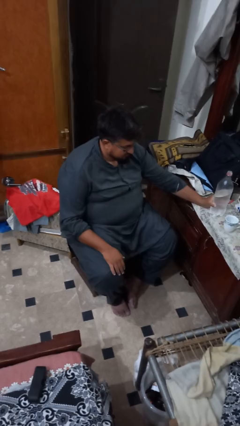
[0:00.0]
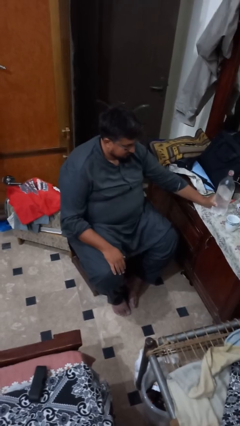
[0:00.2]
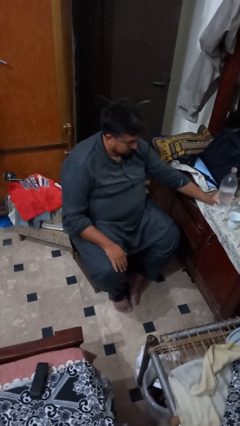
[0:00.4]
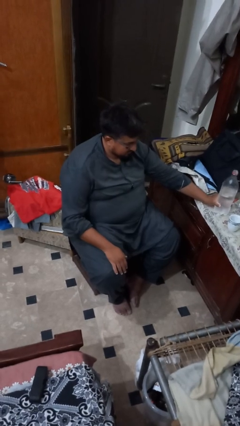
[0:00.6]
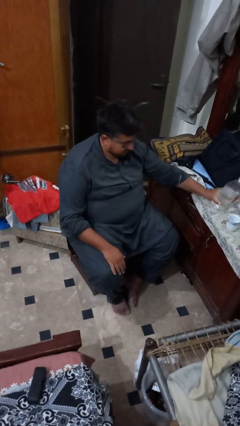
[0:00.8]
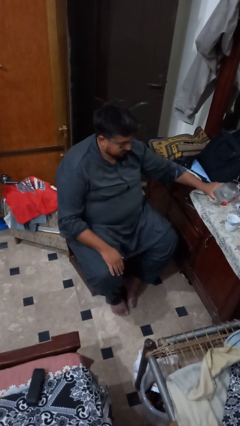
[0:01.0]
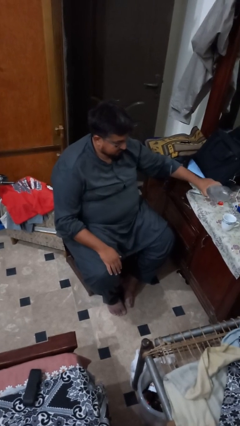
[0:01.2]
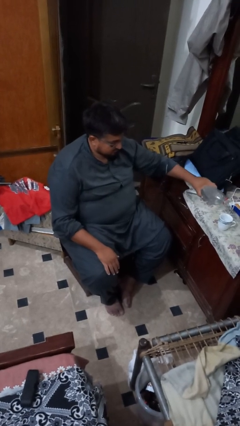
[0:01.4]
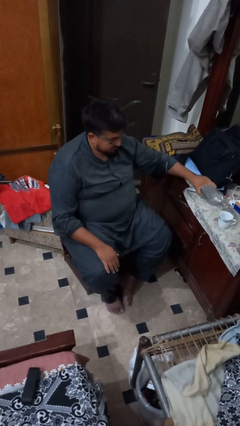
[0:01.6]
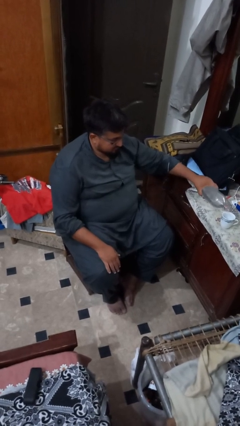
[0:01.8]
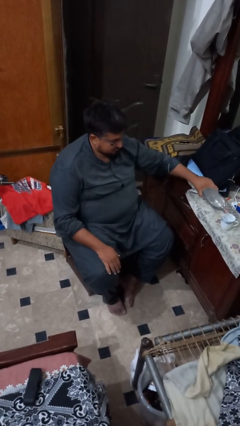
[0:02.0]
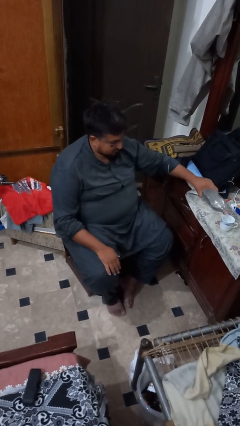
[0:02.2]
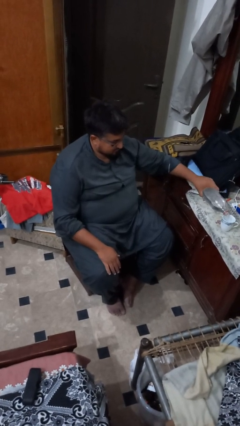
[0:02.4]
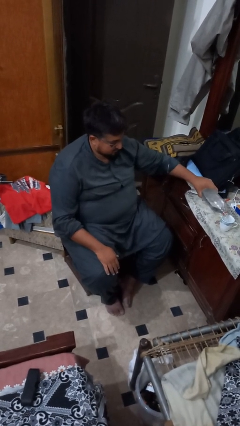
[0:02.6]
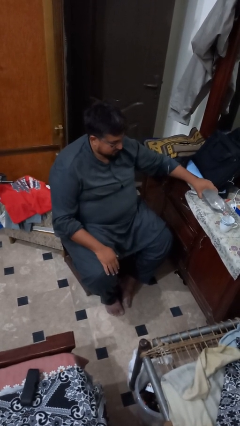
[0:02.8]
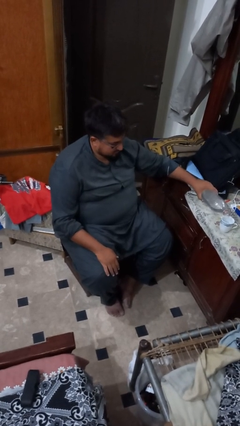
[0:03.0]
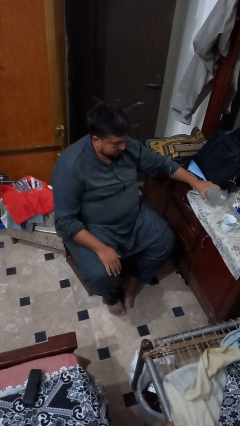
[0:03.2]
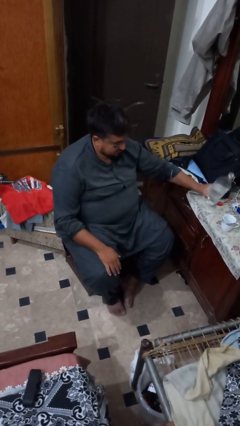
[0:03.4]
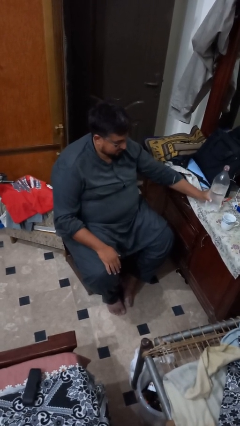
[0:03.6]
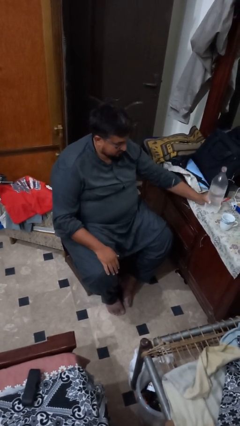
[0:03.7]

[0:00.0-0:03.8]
person pours liquid into cup

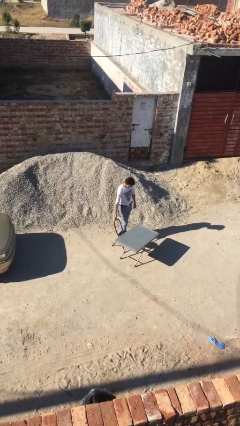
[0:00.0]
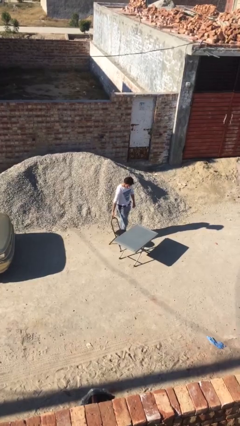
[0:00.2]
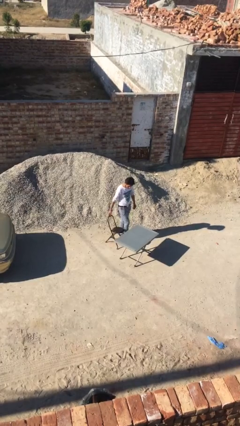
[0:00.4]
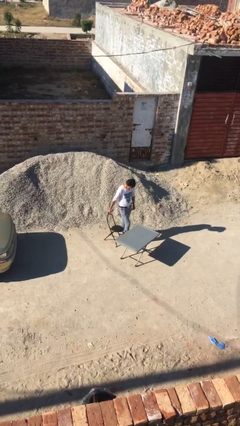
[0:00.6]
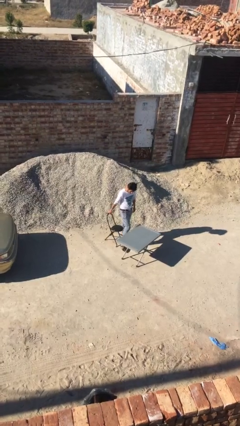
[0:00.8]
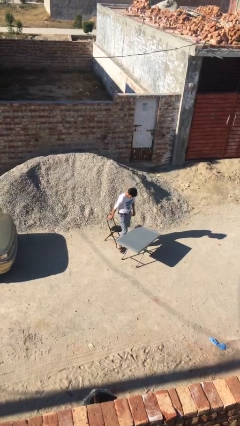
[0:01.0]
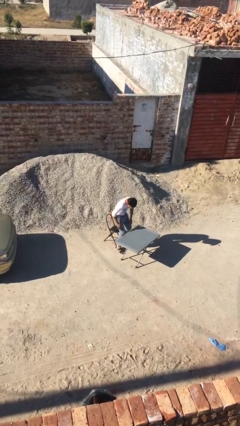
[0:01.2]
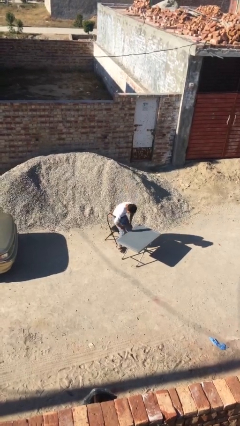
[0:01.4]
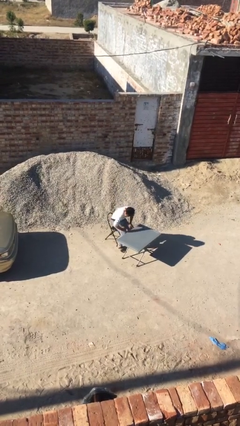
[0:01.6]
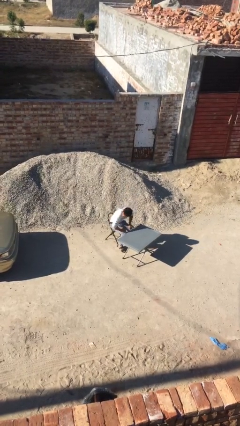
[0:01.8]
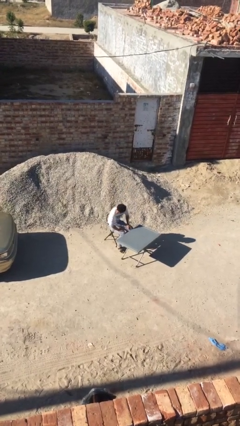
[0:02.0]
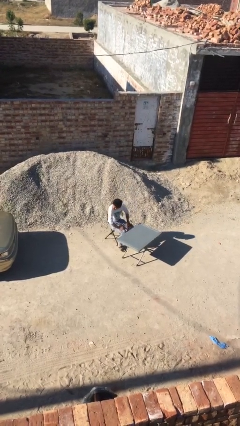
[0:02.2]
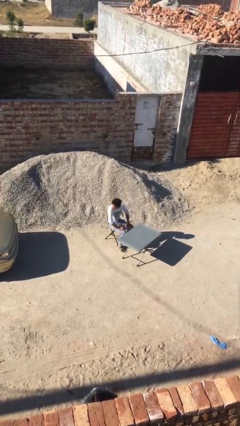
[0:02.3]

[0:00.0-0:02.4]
person sits down

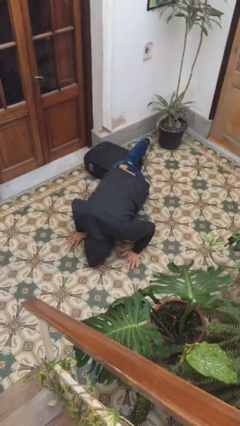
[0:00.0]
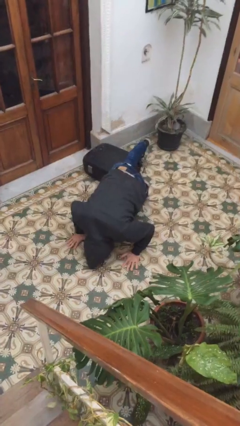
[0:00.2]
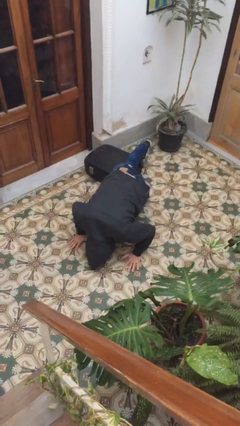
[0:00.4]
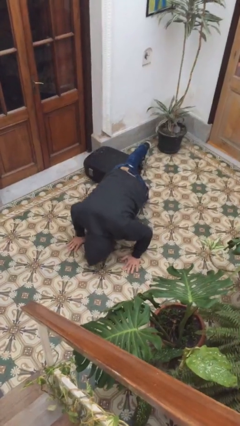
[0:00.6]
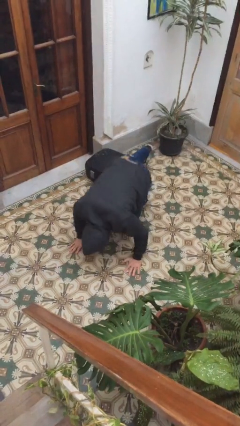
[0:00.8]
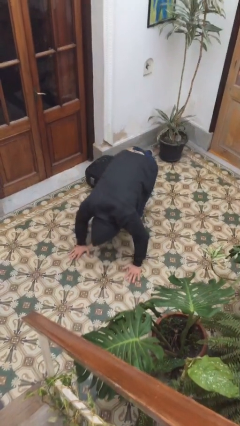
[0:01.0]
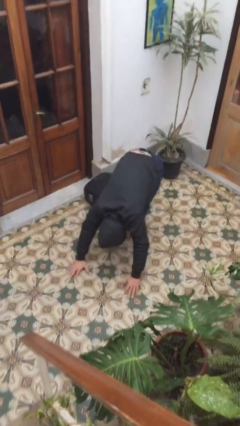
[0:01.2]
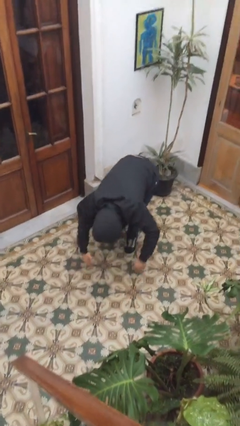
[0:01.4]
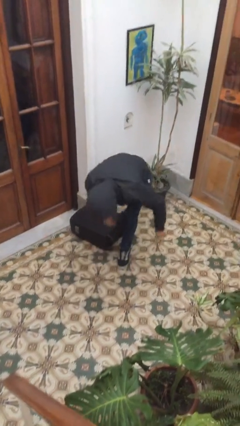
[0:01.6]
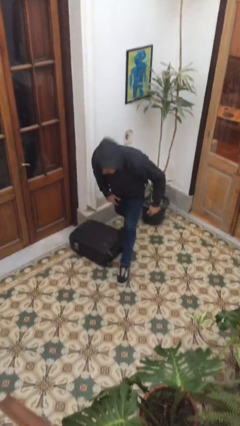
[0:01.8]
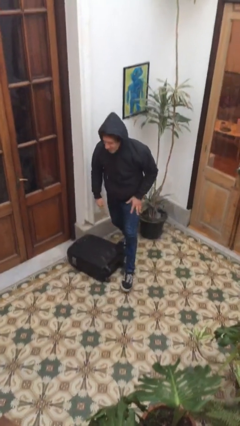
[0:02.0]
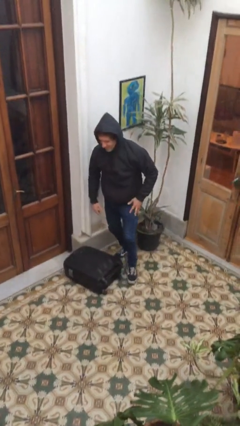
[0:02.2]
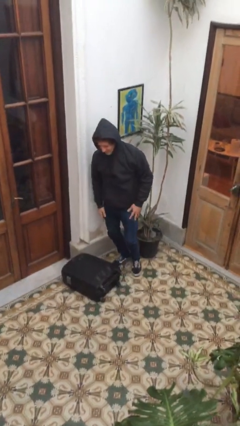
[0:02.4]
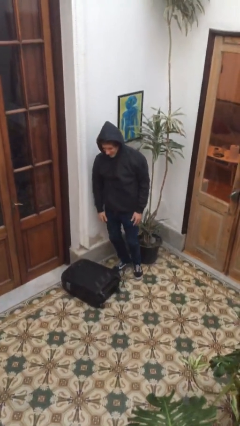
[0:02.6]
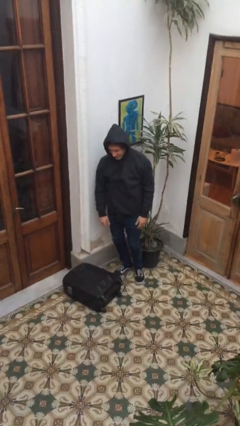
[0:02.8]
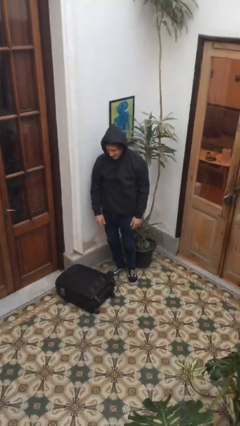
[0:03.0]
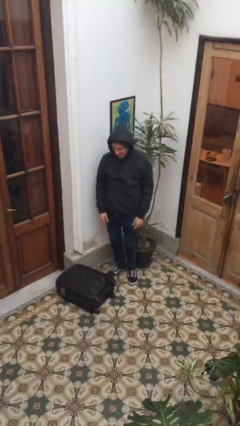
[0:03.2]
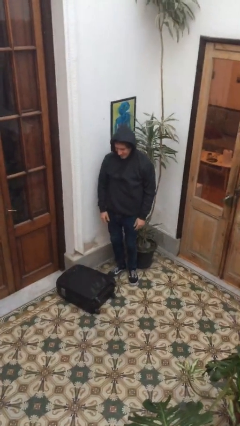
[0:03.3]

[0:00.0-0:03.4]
person stands up from floor

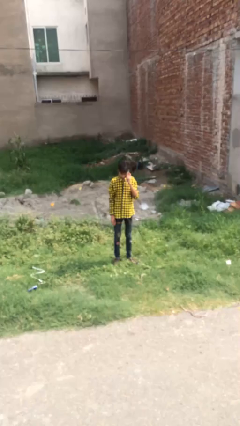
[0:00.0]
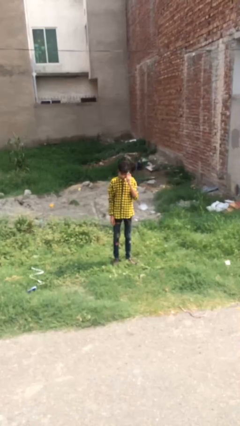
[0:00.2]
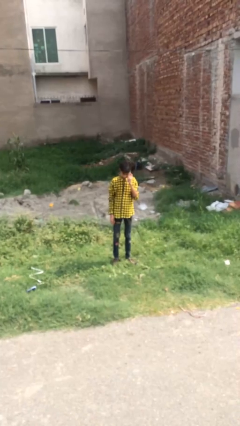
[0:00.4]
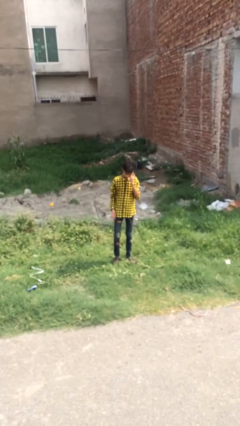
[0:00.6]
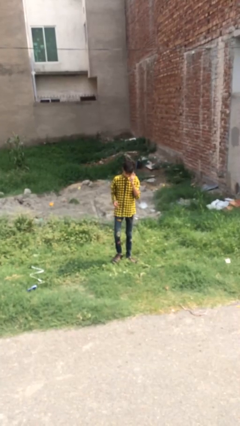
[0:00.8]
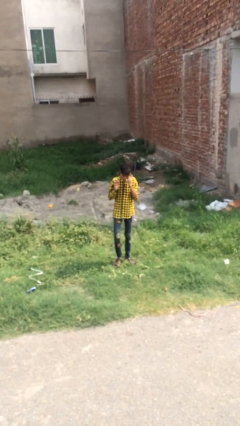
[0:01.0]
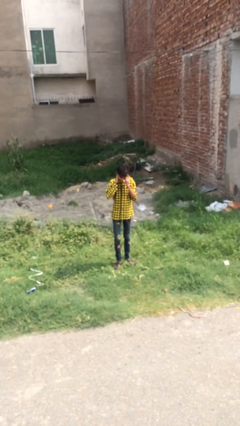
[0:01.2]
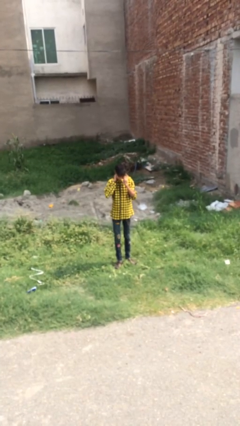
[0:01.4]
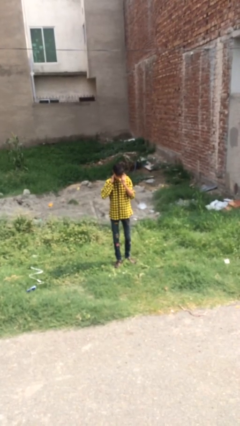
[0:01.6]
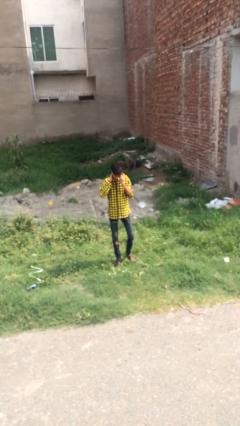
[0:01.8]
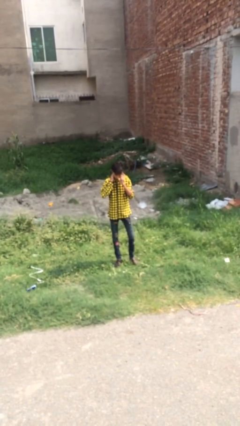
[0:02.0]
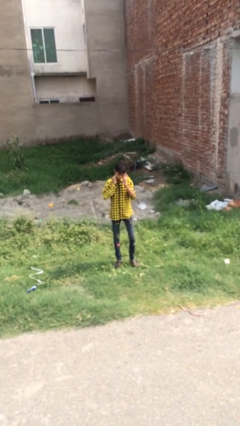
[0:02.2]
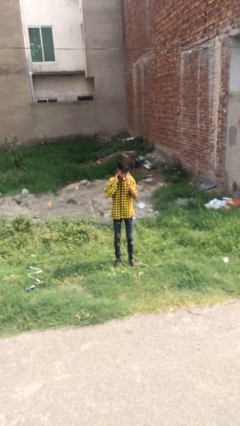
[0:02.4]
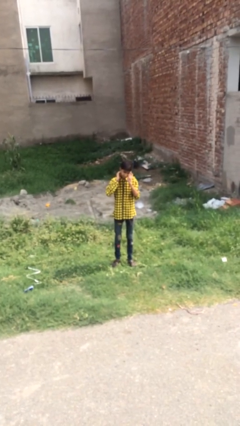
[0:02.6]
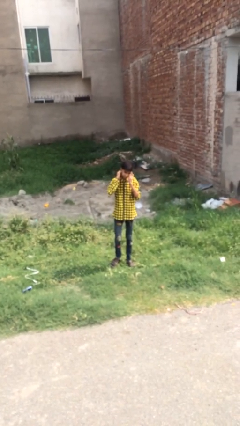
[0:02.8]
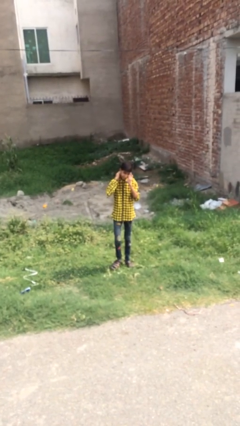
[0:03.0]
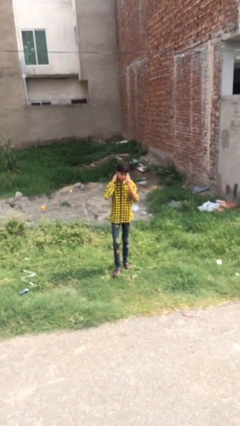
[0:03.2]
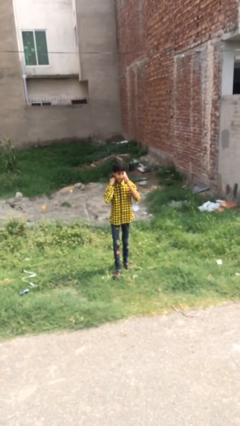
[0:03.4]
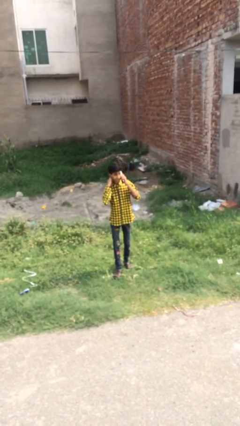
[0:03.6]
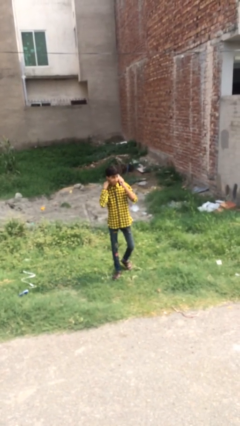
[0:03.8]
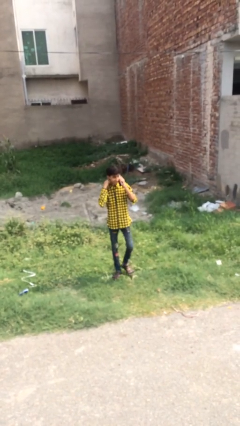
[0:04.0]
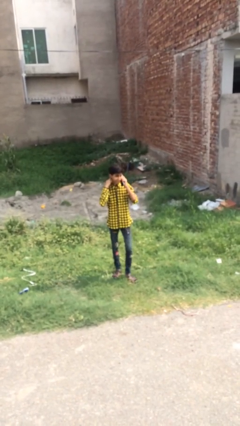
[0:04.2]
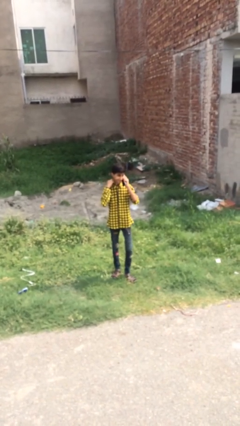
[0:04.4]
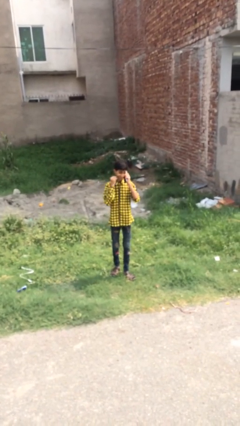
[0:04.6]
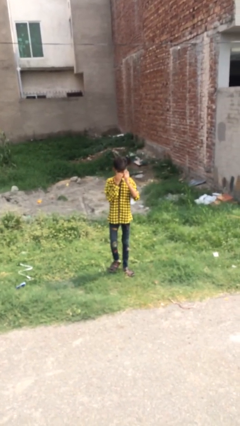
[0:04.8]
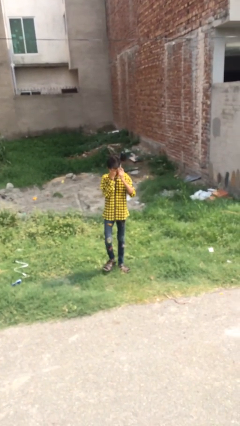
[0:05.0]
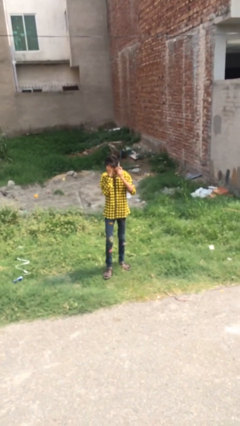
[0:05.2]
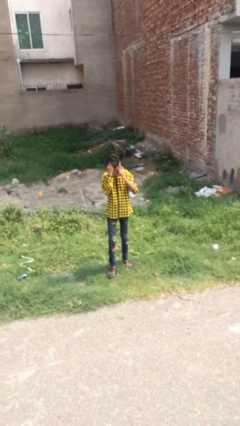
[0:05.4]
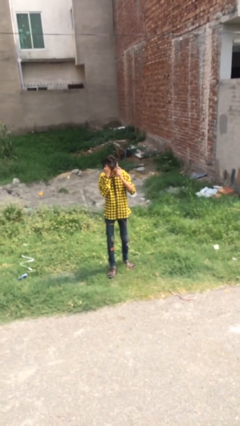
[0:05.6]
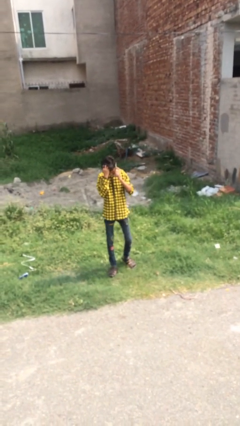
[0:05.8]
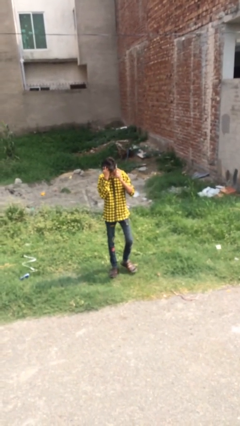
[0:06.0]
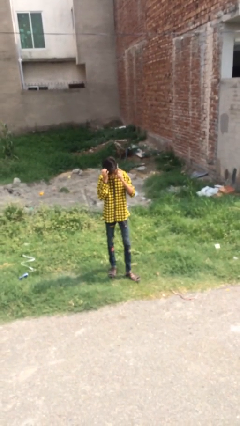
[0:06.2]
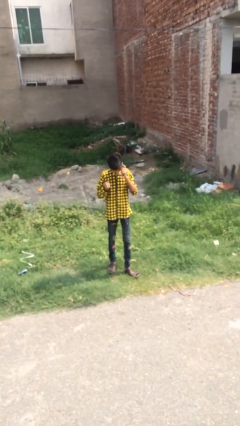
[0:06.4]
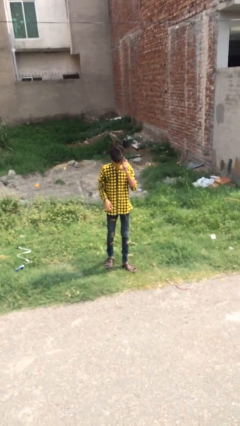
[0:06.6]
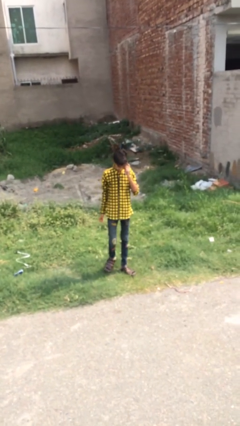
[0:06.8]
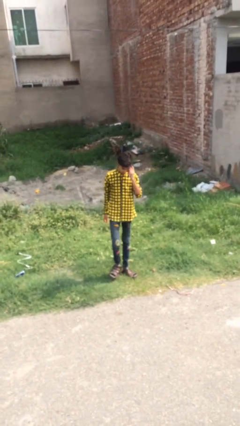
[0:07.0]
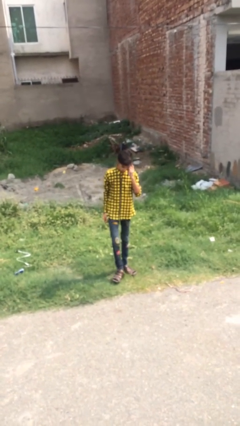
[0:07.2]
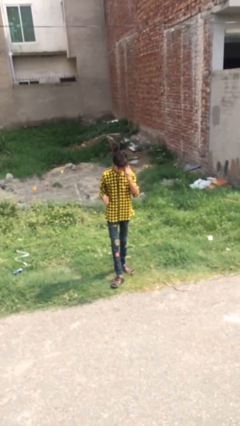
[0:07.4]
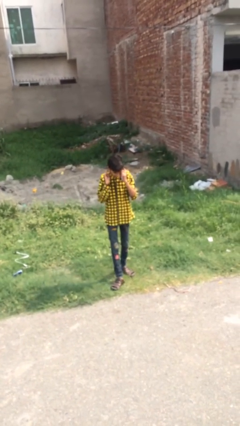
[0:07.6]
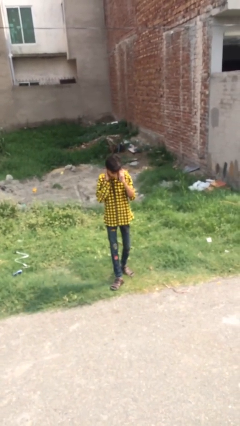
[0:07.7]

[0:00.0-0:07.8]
person talks on phone

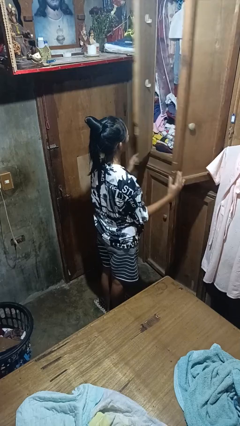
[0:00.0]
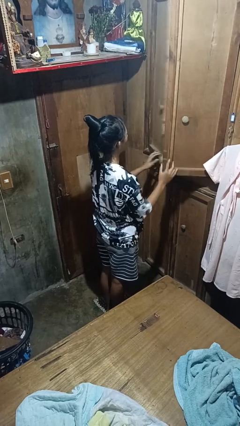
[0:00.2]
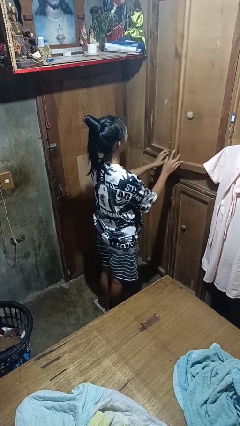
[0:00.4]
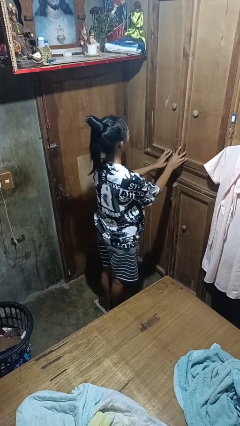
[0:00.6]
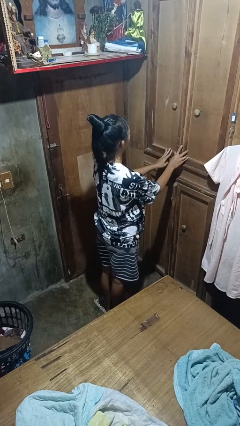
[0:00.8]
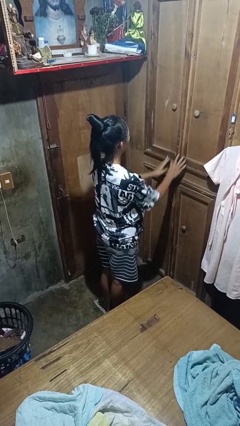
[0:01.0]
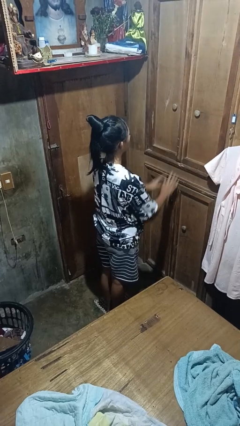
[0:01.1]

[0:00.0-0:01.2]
person closes closet door
